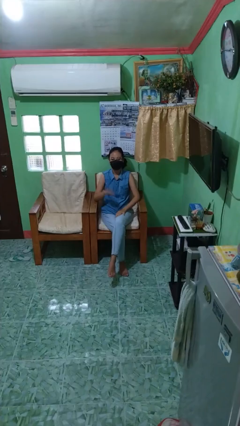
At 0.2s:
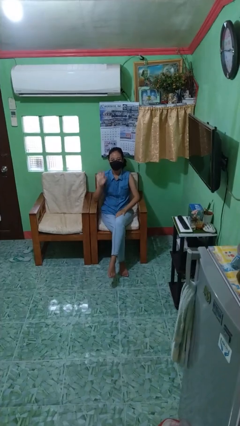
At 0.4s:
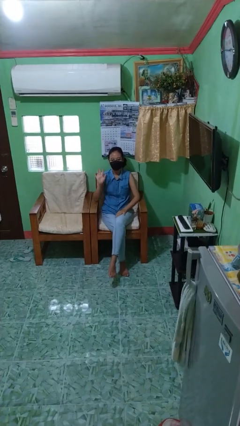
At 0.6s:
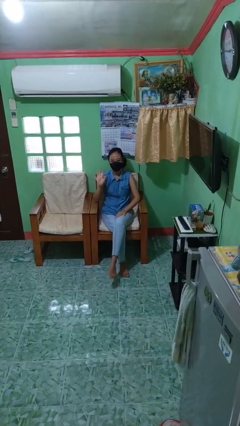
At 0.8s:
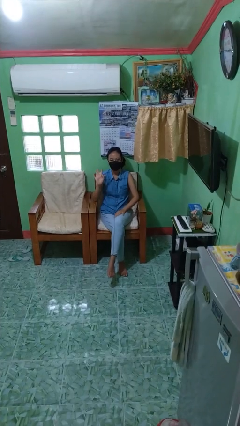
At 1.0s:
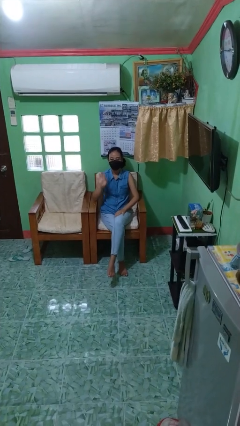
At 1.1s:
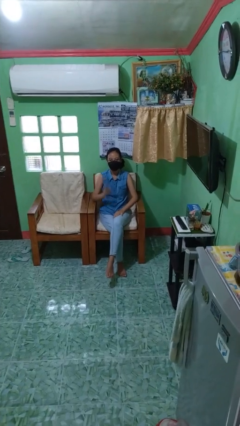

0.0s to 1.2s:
person gestures number five

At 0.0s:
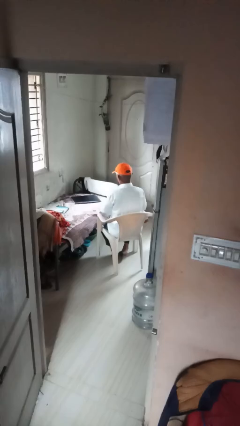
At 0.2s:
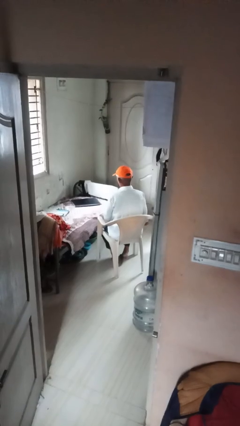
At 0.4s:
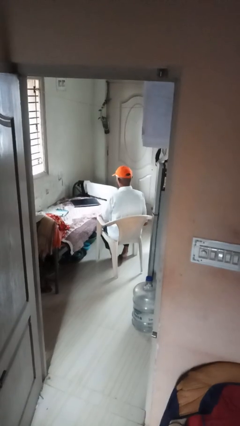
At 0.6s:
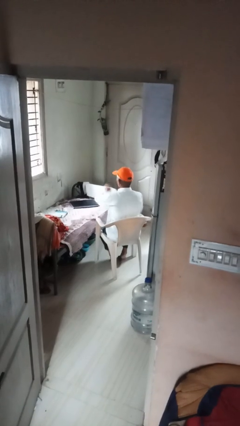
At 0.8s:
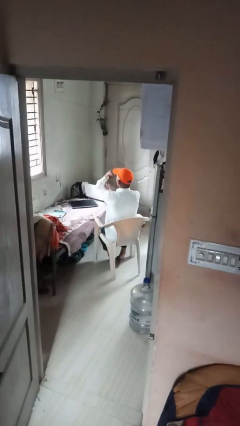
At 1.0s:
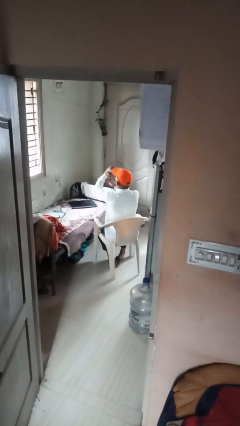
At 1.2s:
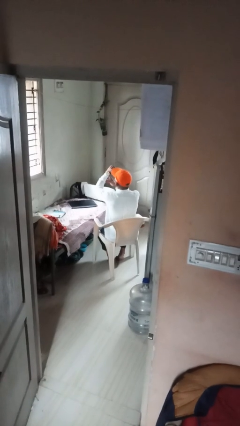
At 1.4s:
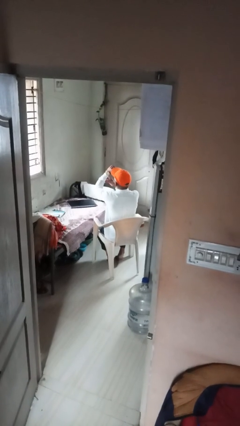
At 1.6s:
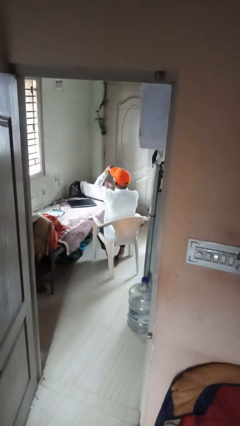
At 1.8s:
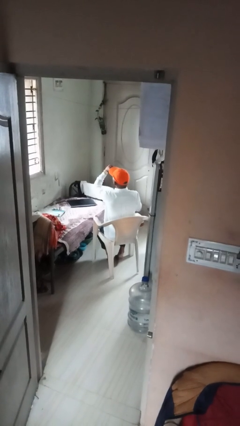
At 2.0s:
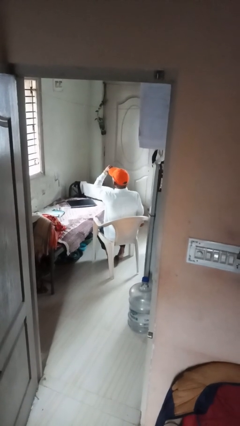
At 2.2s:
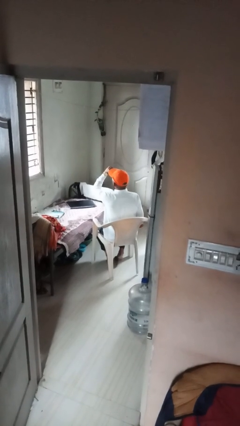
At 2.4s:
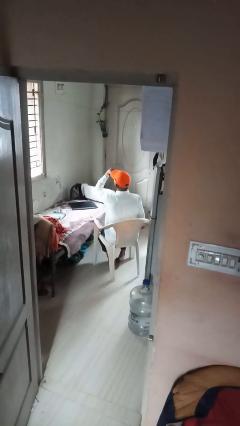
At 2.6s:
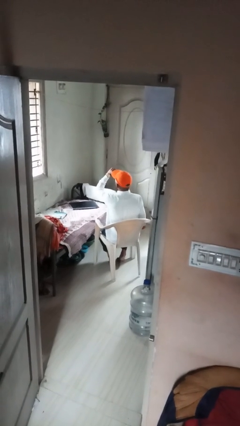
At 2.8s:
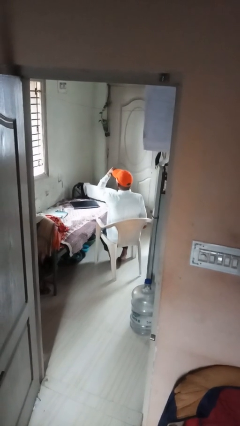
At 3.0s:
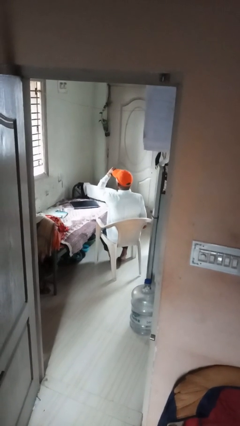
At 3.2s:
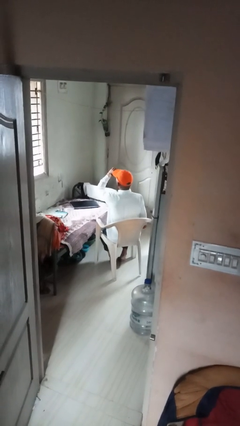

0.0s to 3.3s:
person looks at wristwatch

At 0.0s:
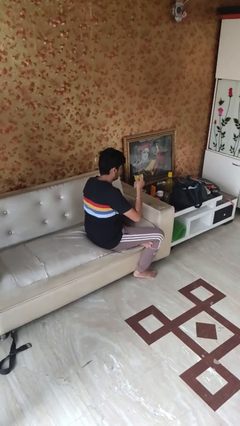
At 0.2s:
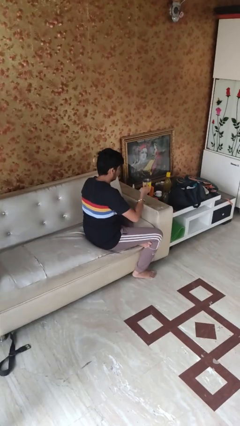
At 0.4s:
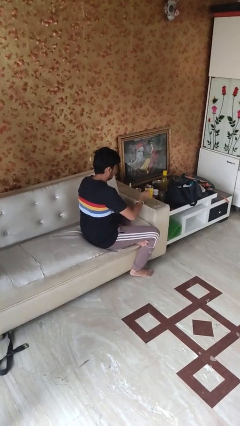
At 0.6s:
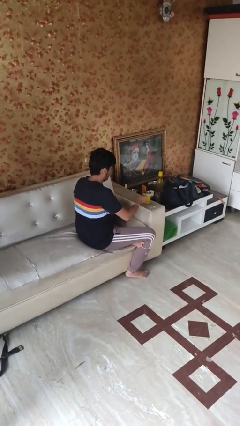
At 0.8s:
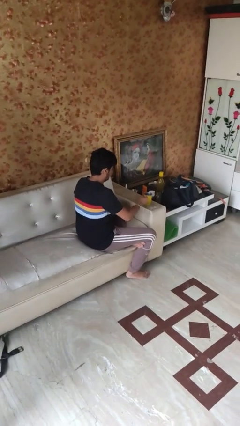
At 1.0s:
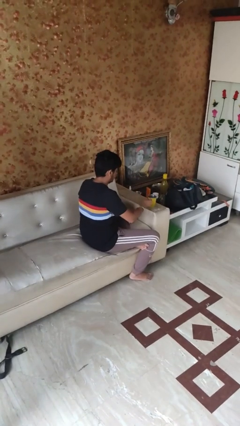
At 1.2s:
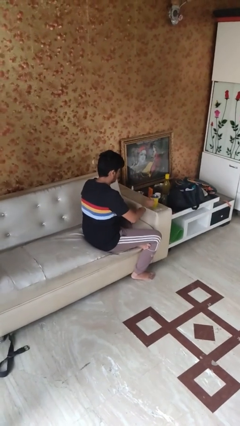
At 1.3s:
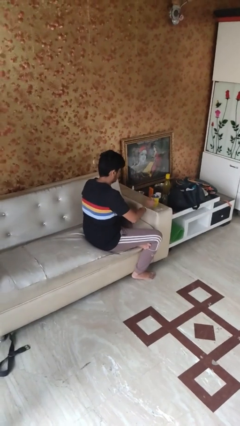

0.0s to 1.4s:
person puts down object on table

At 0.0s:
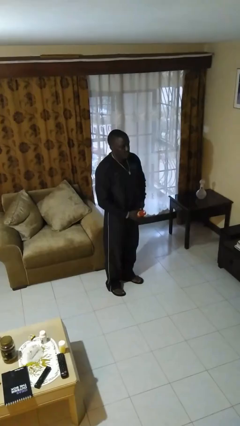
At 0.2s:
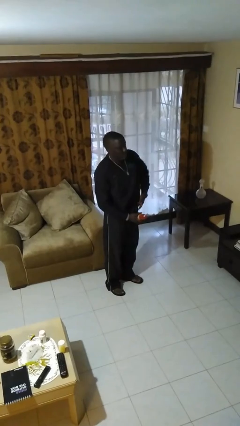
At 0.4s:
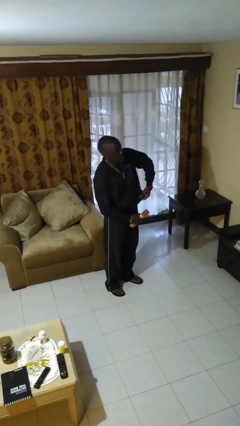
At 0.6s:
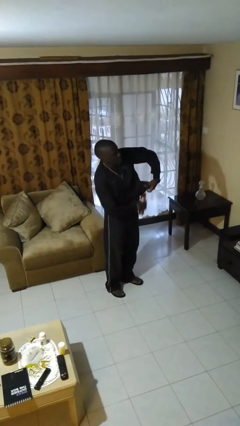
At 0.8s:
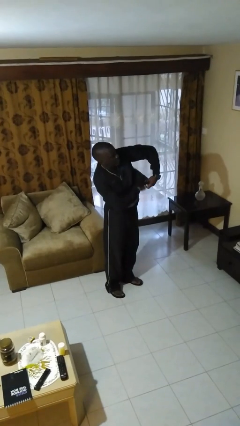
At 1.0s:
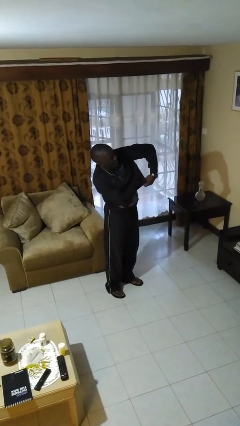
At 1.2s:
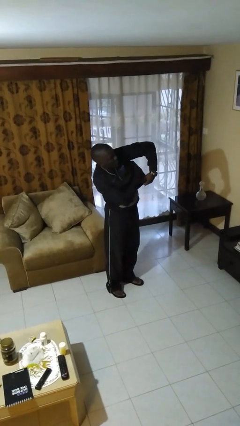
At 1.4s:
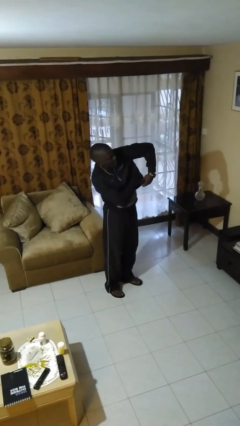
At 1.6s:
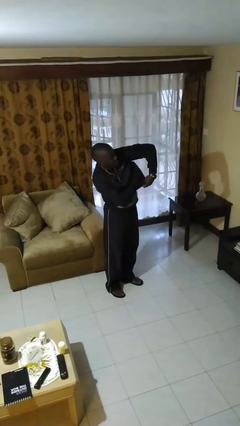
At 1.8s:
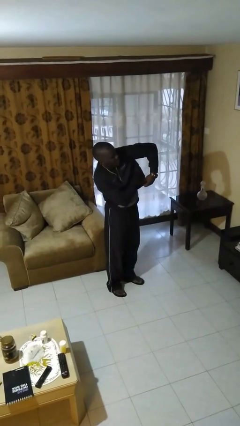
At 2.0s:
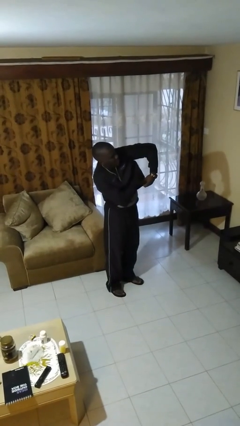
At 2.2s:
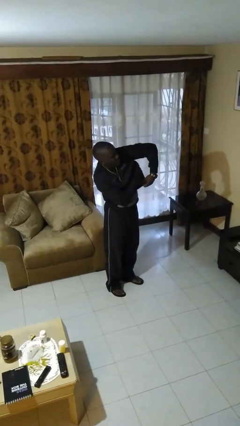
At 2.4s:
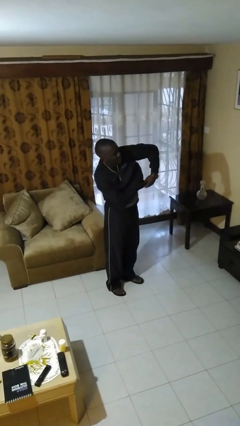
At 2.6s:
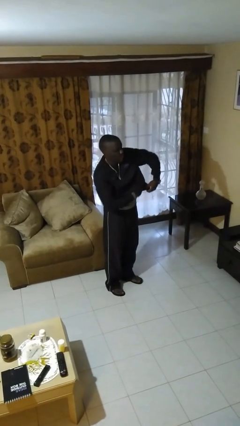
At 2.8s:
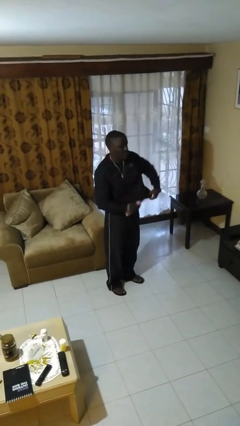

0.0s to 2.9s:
person applies deodorant

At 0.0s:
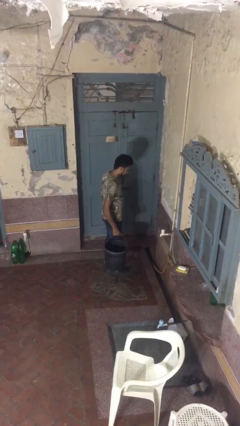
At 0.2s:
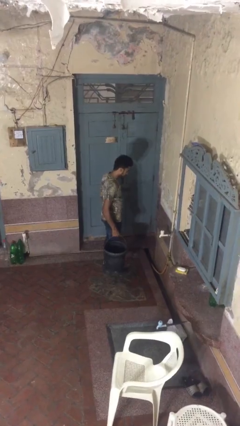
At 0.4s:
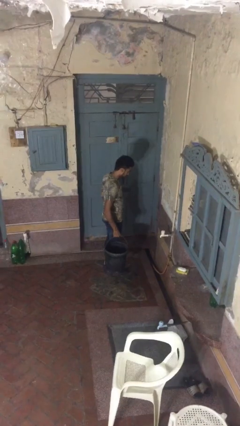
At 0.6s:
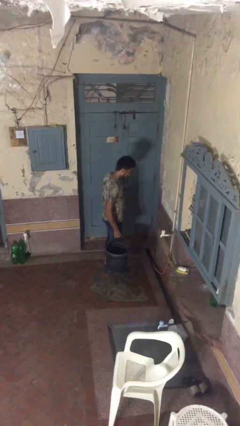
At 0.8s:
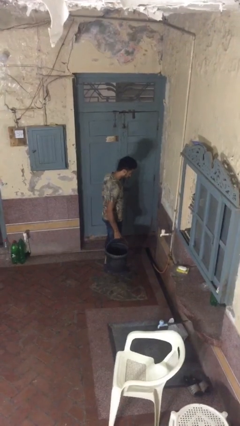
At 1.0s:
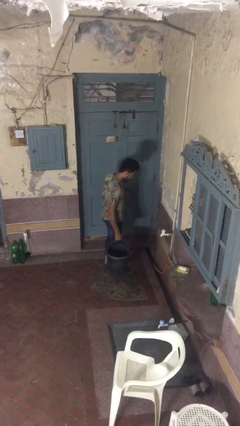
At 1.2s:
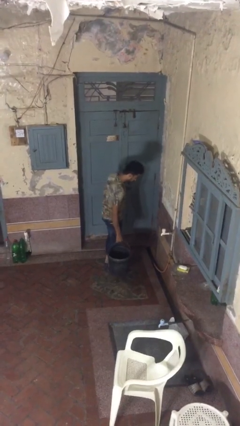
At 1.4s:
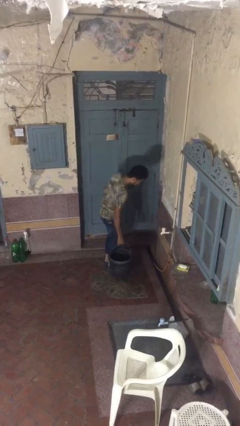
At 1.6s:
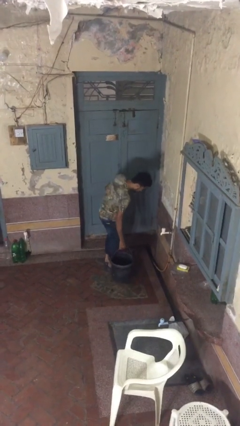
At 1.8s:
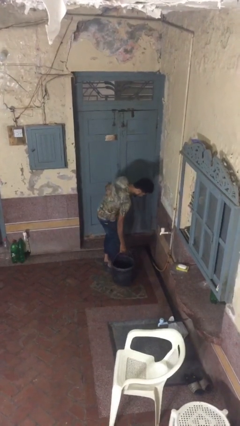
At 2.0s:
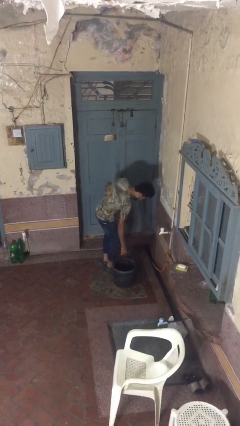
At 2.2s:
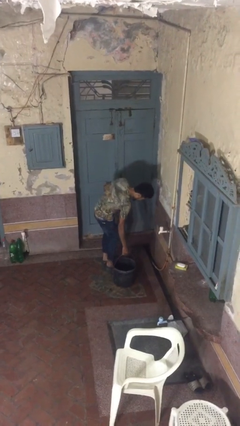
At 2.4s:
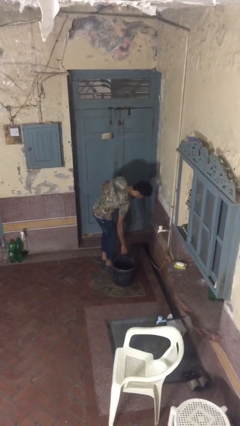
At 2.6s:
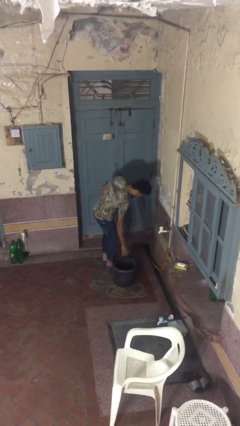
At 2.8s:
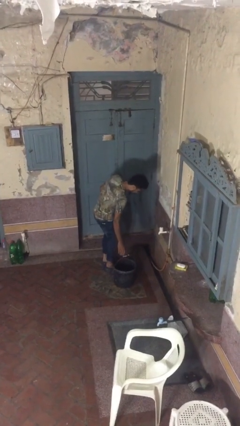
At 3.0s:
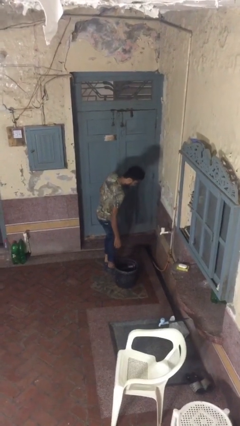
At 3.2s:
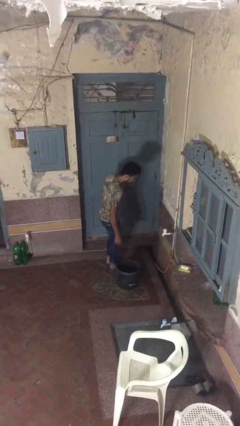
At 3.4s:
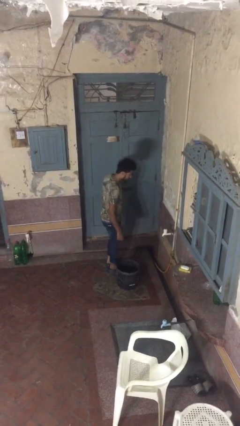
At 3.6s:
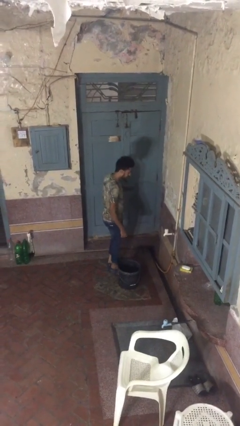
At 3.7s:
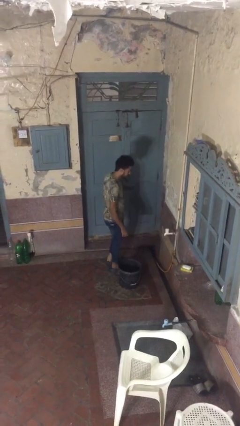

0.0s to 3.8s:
person puts down object on floor

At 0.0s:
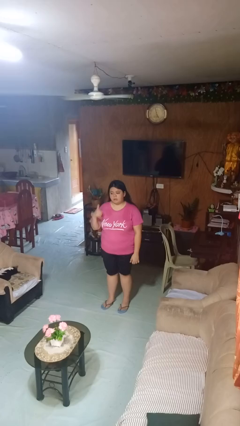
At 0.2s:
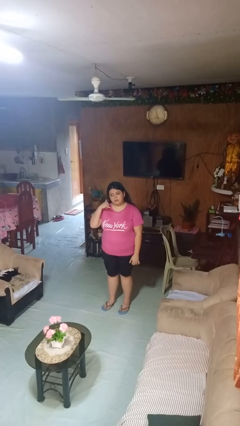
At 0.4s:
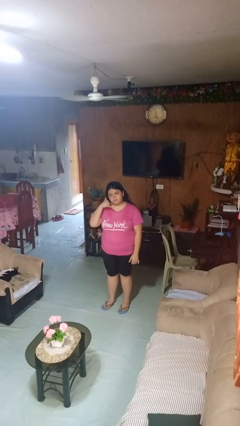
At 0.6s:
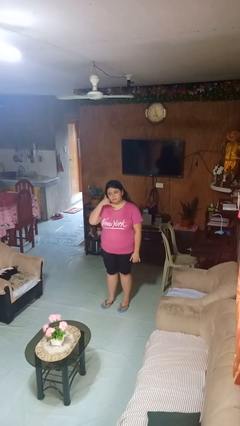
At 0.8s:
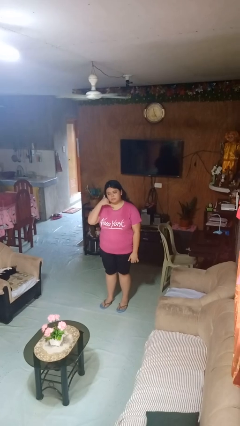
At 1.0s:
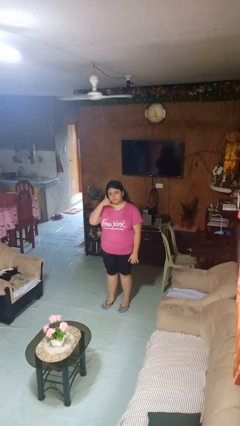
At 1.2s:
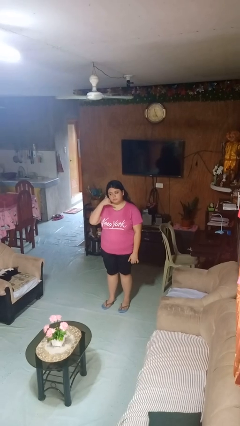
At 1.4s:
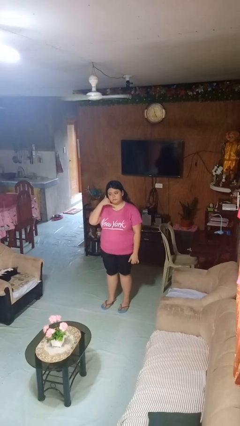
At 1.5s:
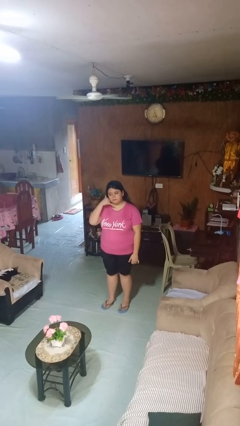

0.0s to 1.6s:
person gestures call me

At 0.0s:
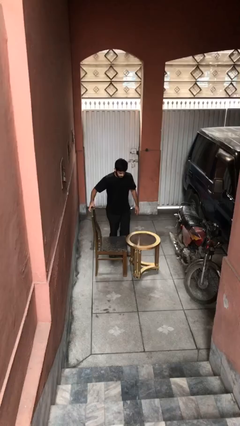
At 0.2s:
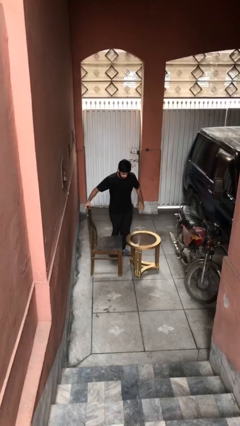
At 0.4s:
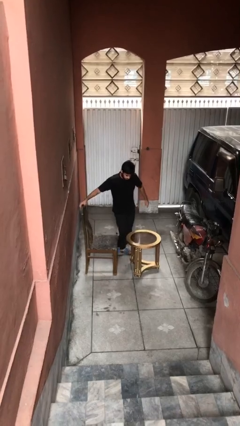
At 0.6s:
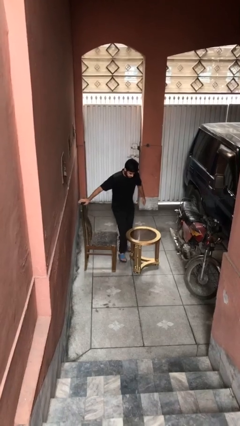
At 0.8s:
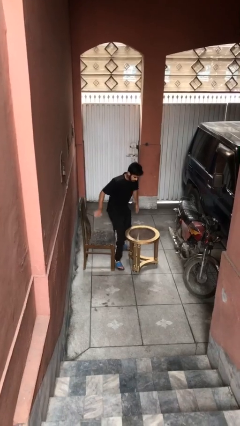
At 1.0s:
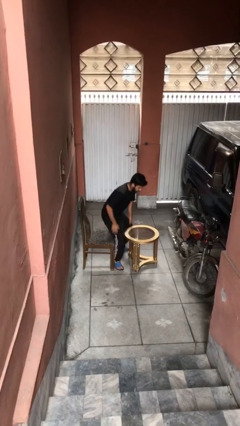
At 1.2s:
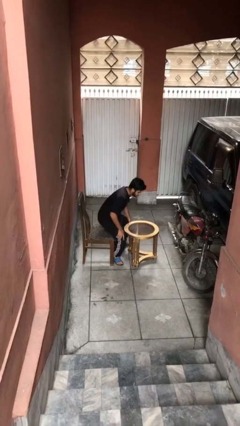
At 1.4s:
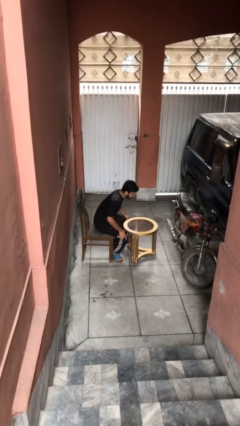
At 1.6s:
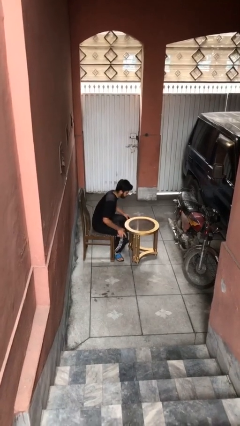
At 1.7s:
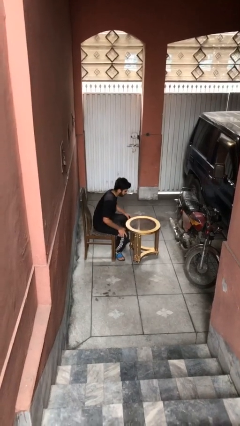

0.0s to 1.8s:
person sits down

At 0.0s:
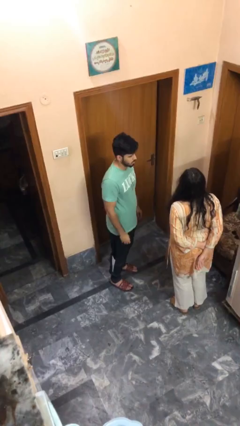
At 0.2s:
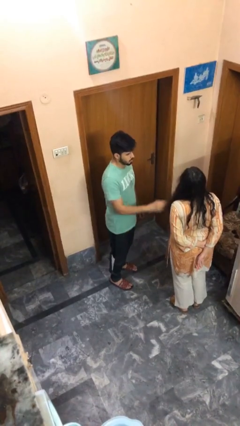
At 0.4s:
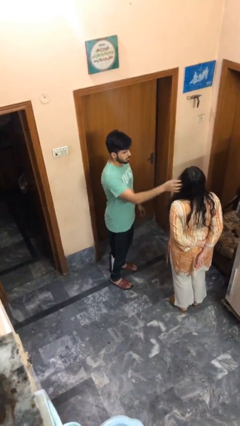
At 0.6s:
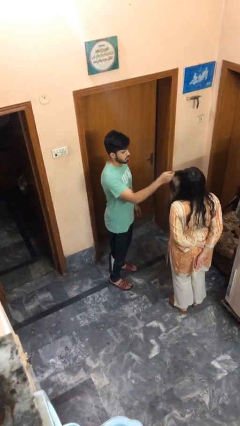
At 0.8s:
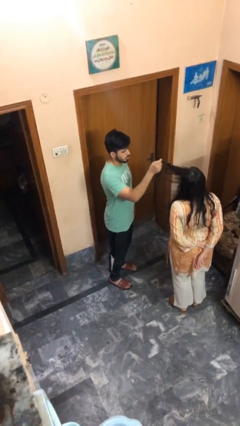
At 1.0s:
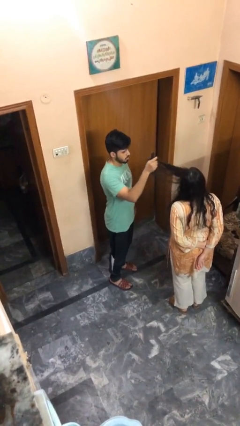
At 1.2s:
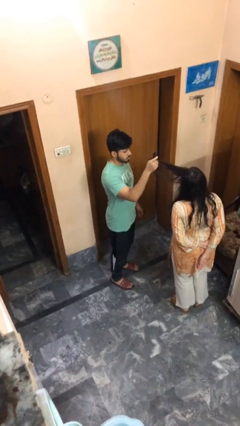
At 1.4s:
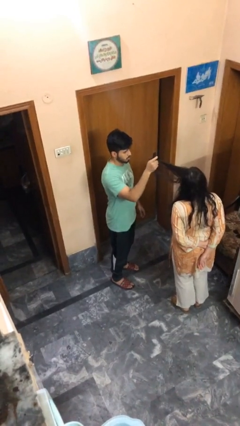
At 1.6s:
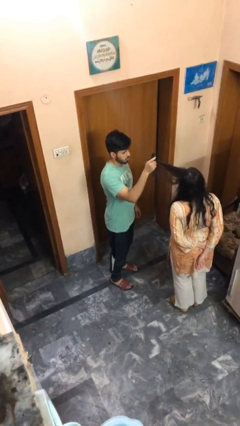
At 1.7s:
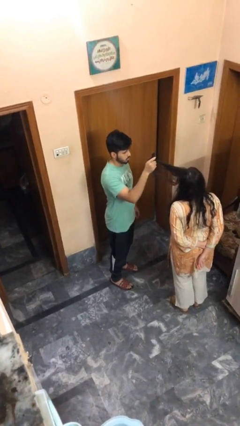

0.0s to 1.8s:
person grabs person by hair
